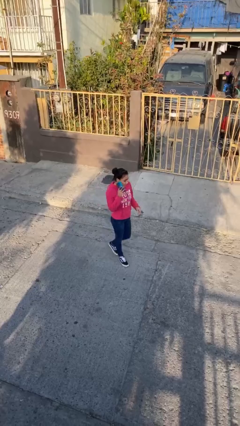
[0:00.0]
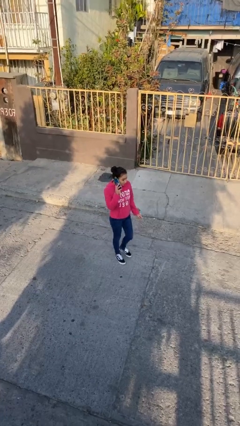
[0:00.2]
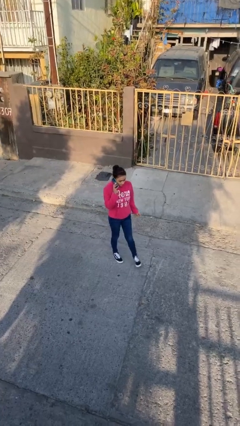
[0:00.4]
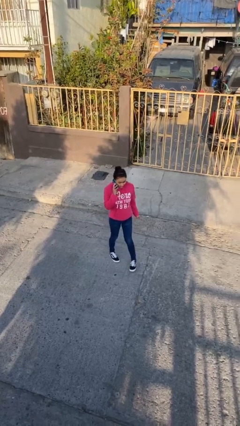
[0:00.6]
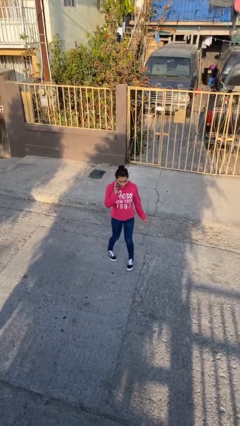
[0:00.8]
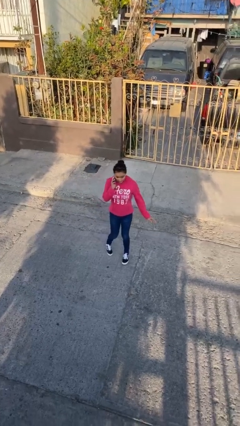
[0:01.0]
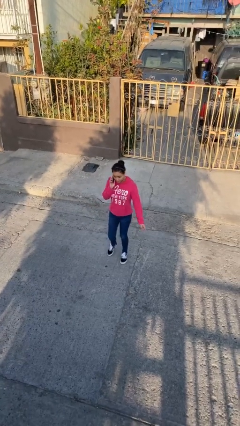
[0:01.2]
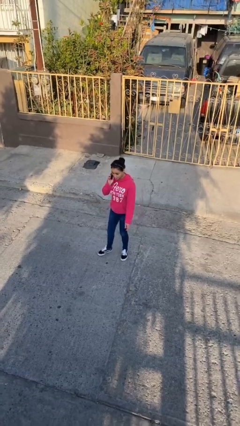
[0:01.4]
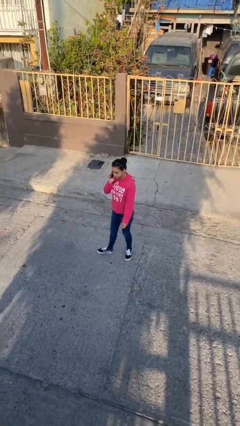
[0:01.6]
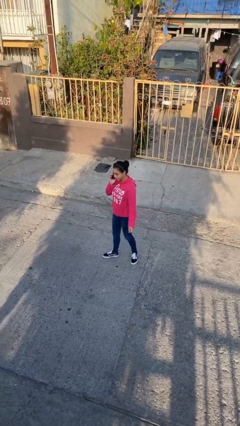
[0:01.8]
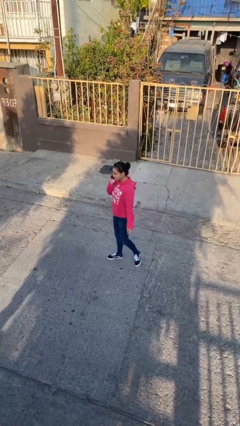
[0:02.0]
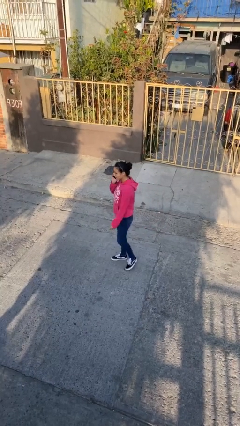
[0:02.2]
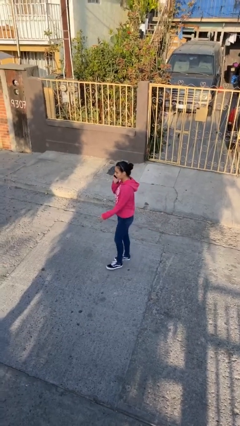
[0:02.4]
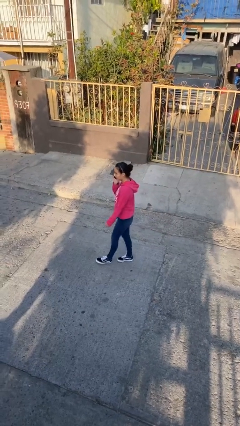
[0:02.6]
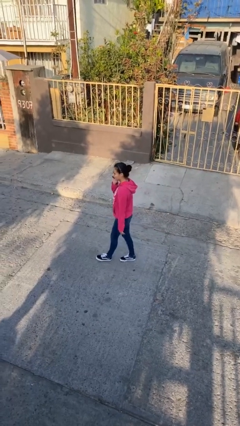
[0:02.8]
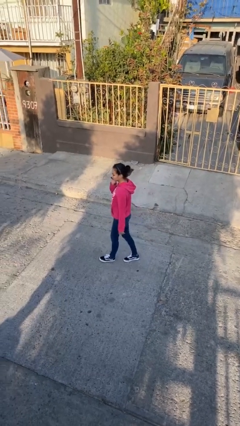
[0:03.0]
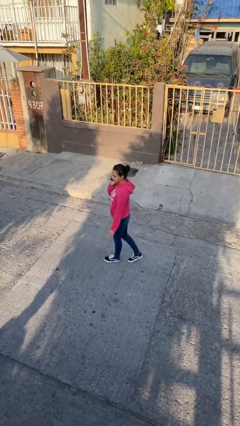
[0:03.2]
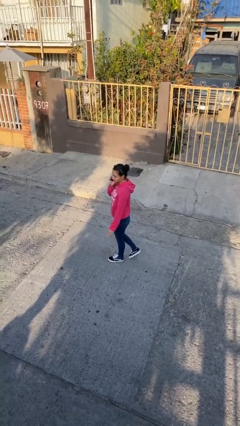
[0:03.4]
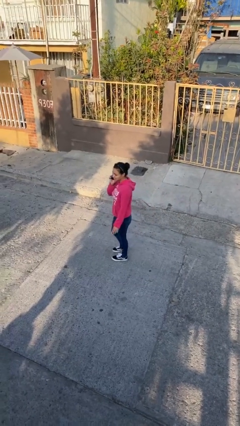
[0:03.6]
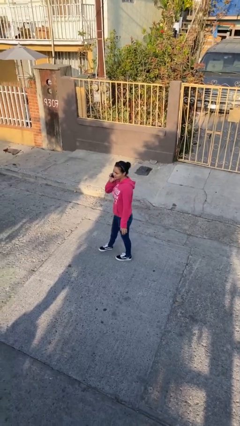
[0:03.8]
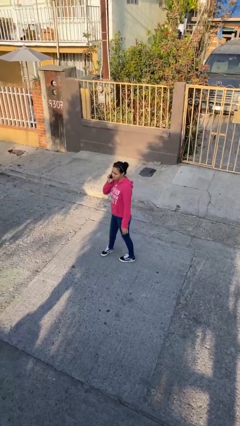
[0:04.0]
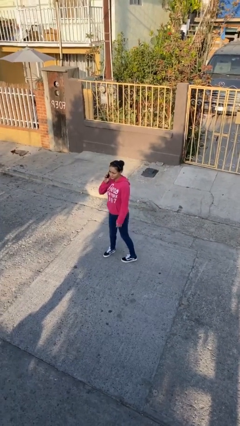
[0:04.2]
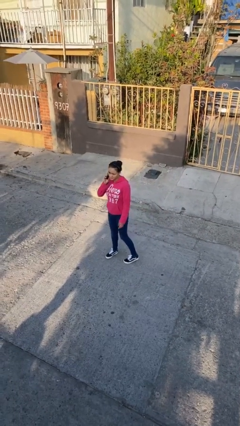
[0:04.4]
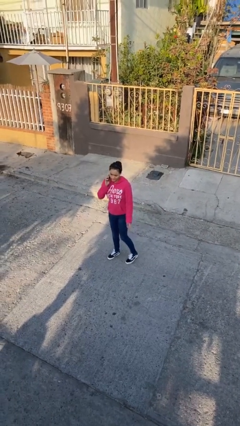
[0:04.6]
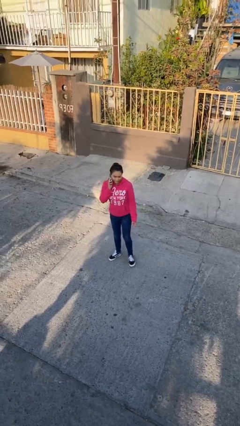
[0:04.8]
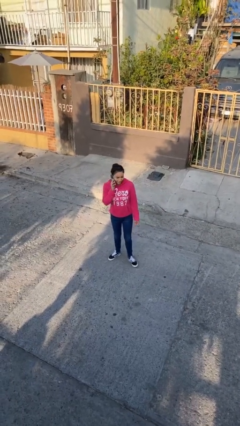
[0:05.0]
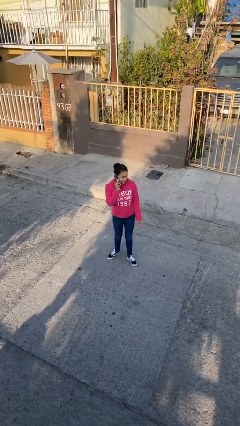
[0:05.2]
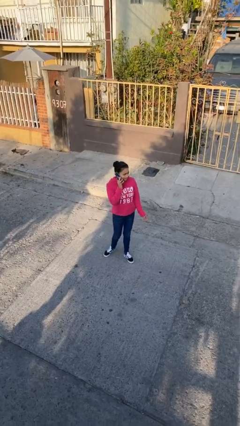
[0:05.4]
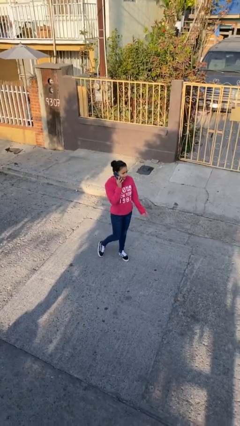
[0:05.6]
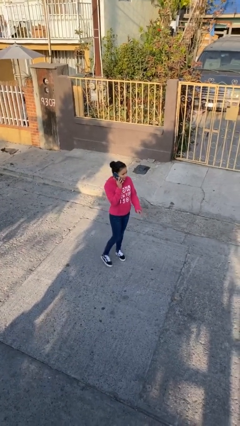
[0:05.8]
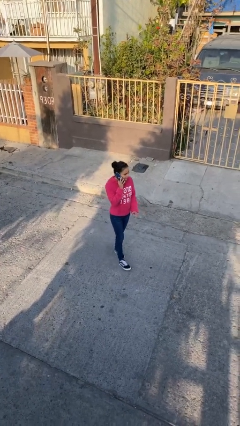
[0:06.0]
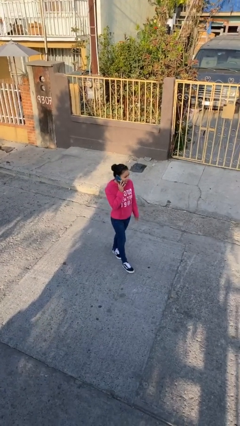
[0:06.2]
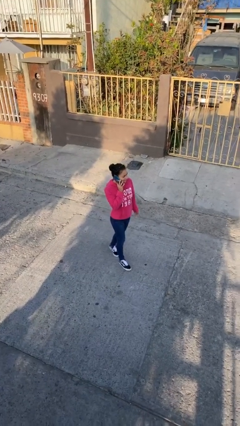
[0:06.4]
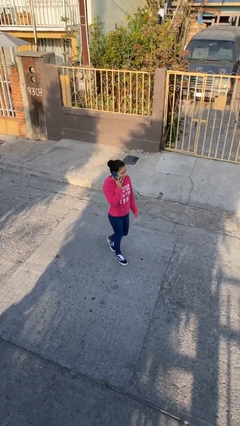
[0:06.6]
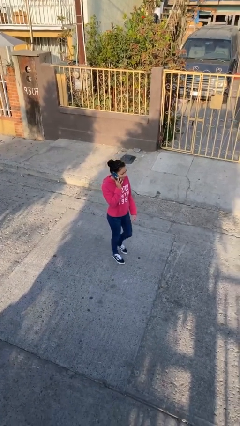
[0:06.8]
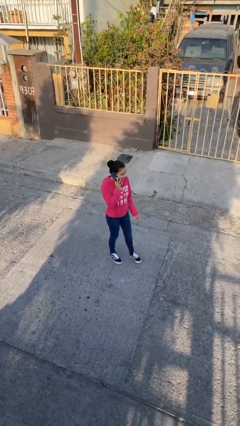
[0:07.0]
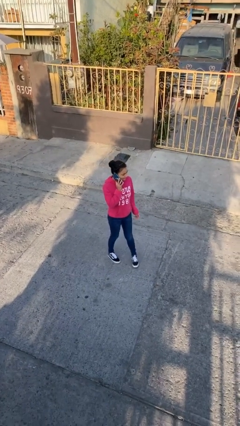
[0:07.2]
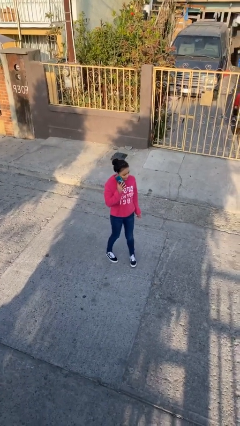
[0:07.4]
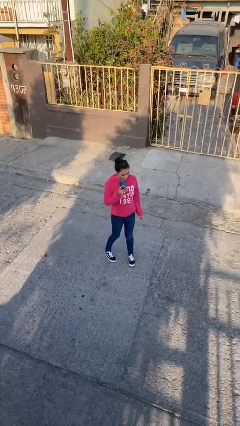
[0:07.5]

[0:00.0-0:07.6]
person talks on phone

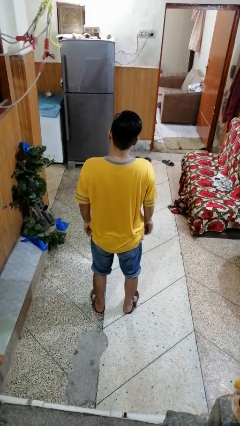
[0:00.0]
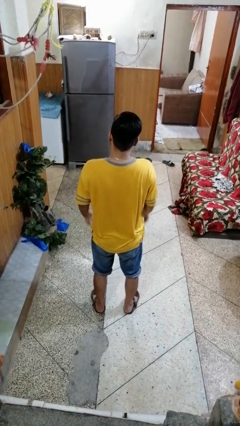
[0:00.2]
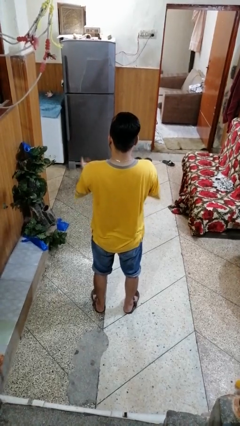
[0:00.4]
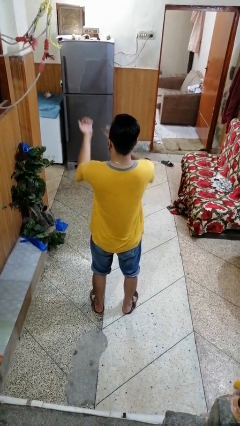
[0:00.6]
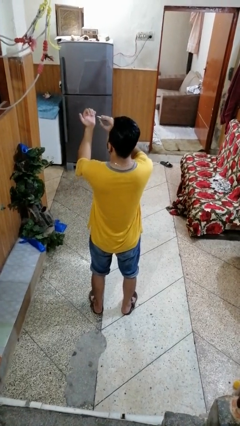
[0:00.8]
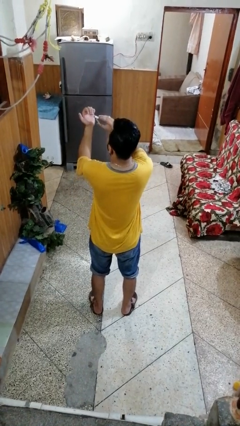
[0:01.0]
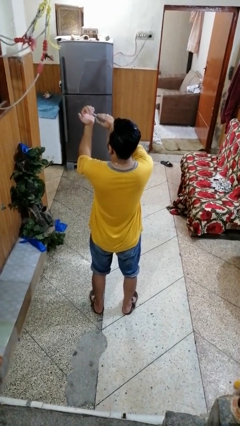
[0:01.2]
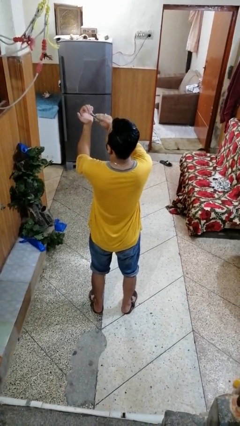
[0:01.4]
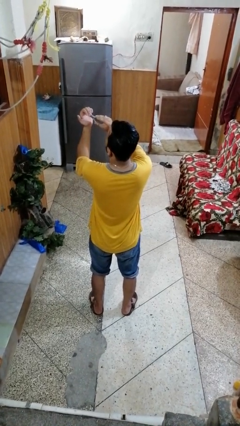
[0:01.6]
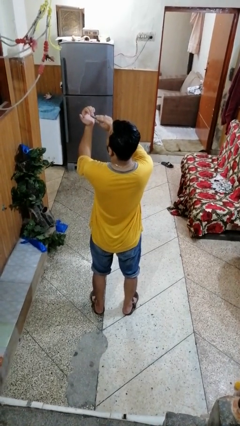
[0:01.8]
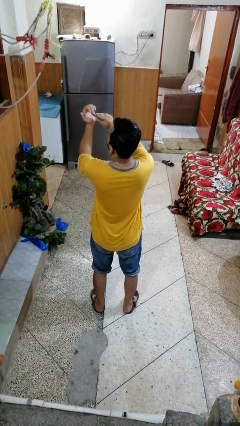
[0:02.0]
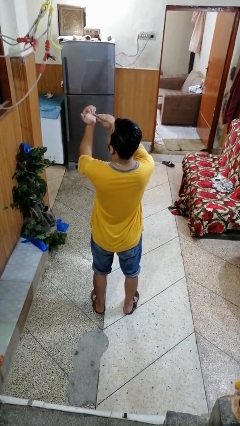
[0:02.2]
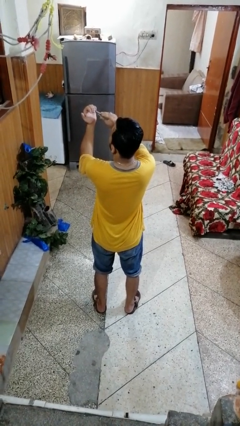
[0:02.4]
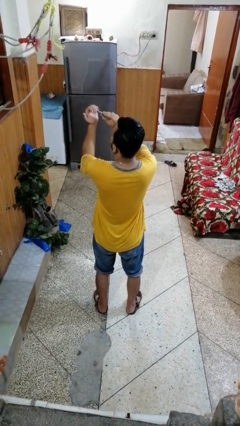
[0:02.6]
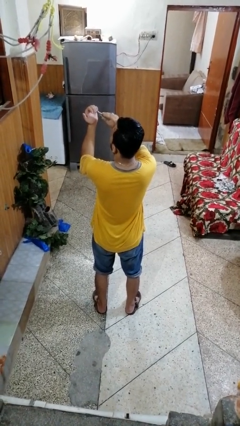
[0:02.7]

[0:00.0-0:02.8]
person clips fingernails

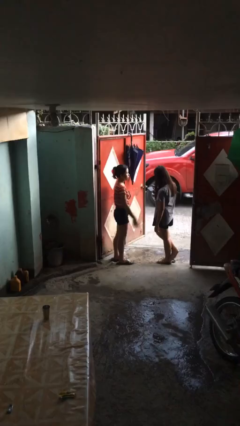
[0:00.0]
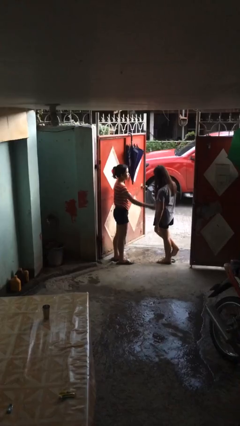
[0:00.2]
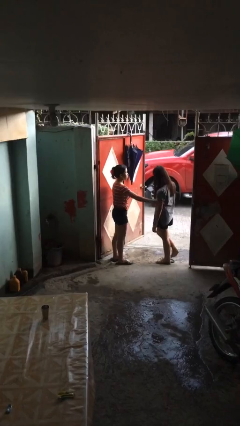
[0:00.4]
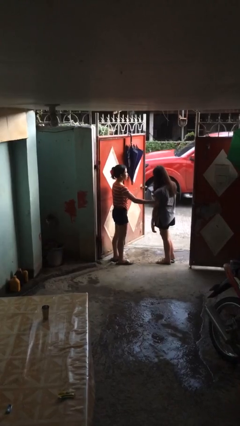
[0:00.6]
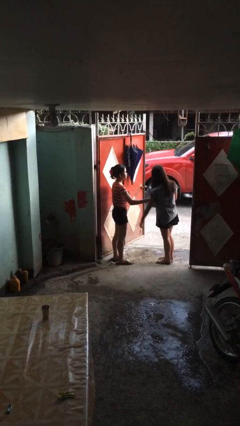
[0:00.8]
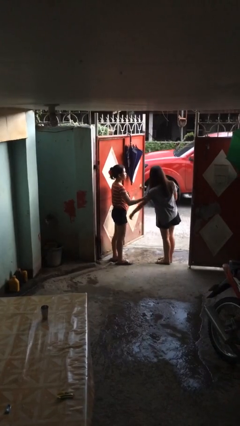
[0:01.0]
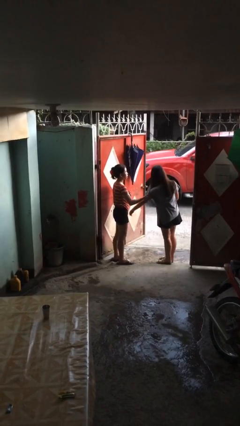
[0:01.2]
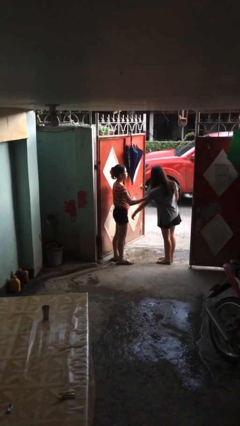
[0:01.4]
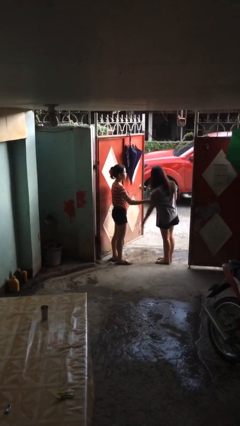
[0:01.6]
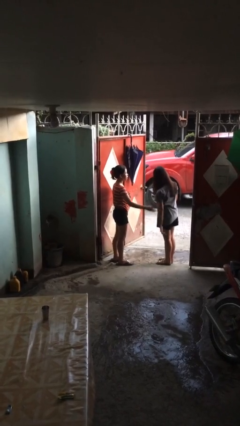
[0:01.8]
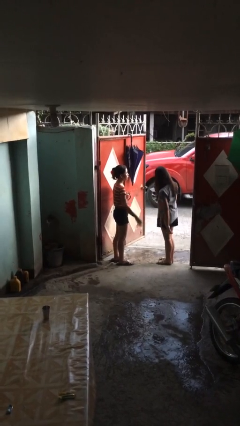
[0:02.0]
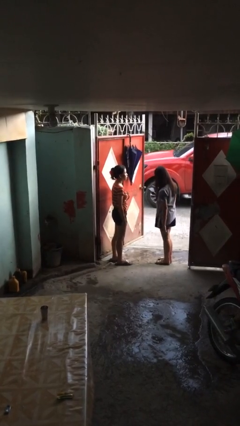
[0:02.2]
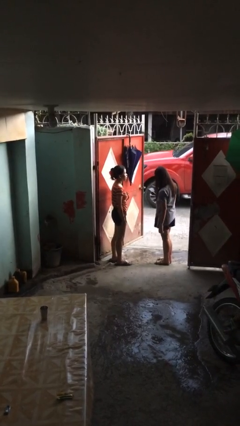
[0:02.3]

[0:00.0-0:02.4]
person grabs person by bicep

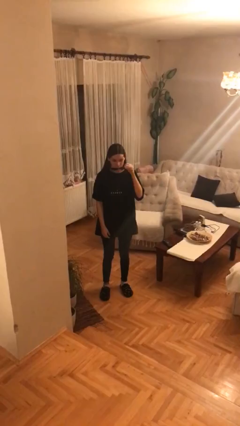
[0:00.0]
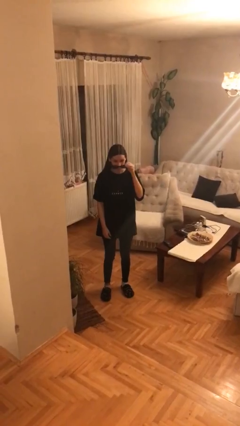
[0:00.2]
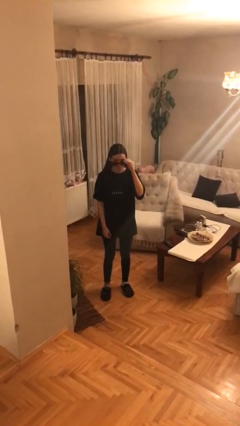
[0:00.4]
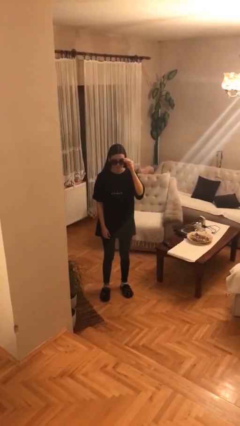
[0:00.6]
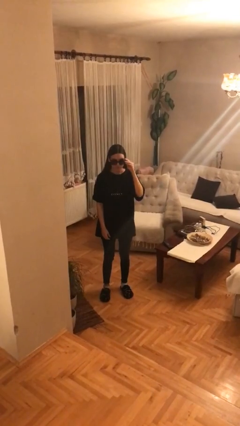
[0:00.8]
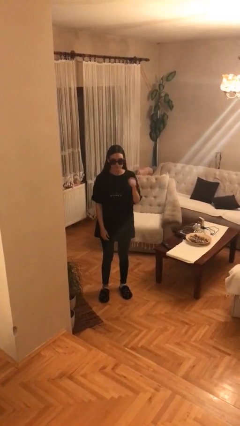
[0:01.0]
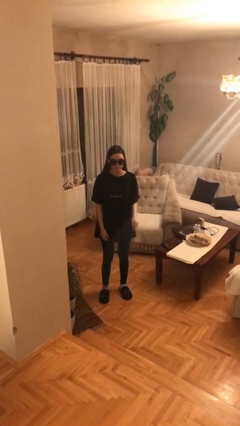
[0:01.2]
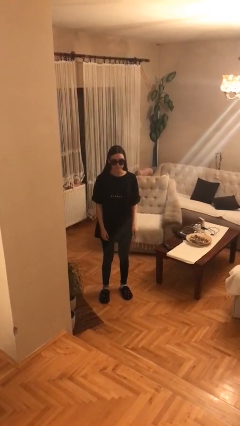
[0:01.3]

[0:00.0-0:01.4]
person puts on sunglasses

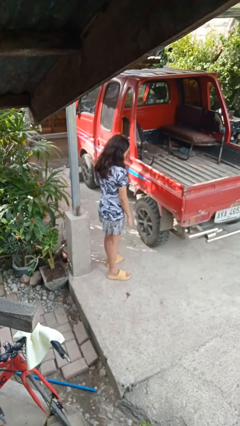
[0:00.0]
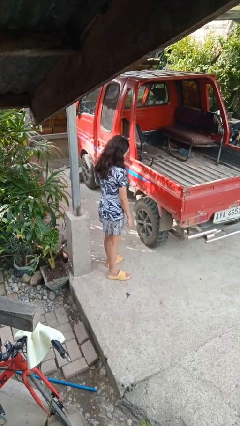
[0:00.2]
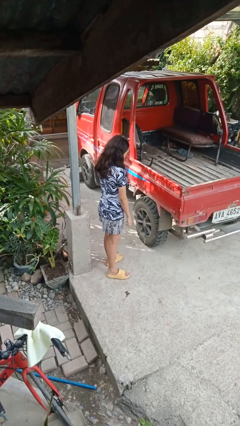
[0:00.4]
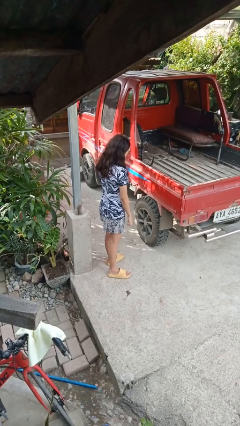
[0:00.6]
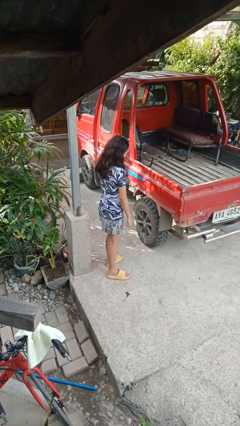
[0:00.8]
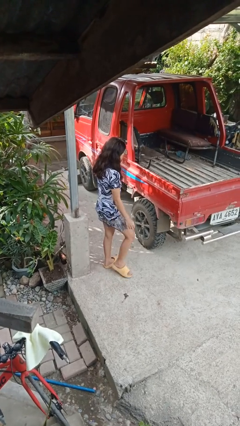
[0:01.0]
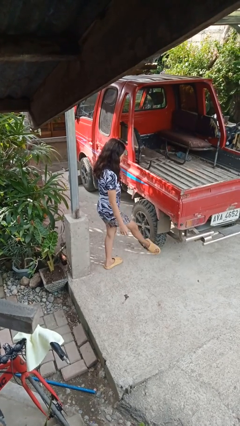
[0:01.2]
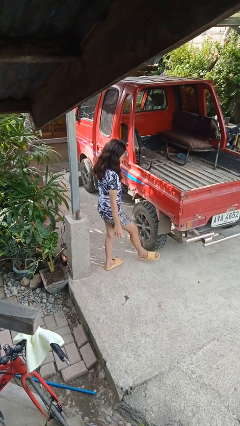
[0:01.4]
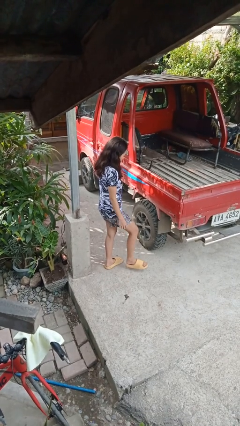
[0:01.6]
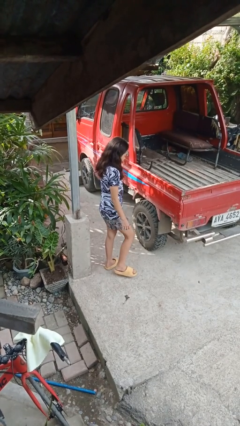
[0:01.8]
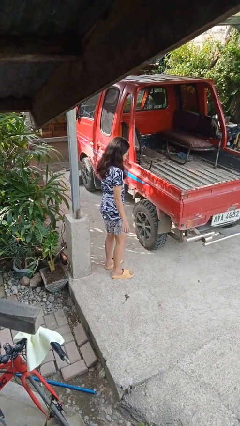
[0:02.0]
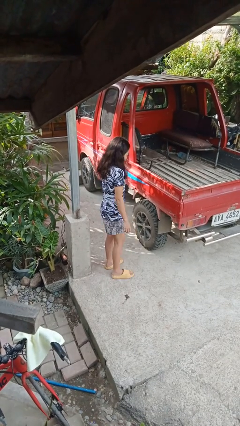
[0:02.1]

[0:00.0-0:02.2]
person kicks car tires

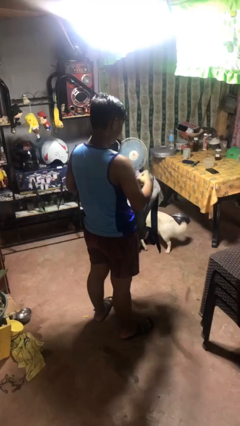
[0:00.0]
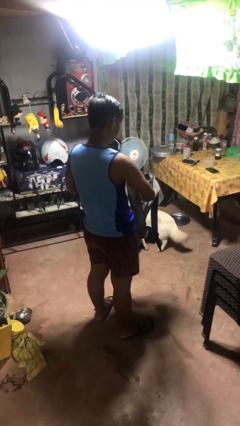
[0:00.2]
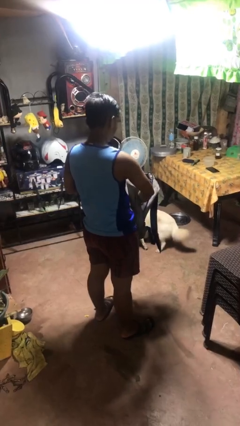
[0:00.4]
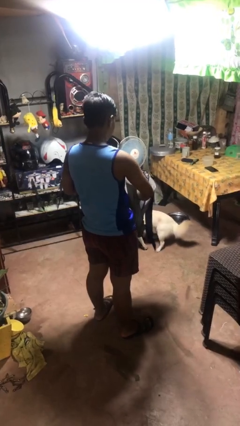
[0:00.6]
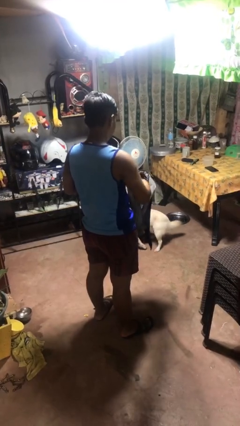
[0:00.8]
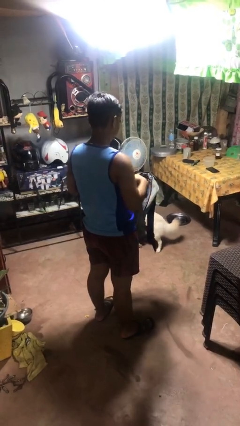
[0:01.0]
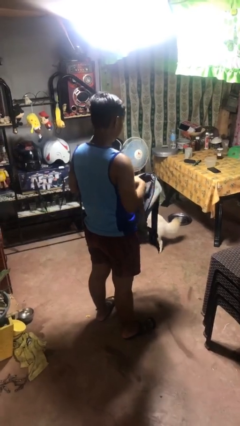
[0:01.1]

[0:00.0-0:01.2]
person puts object into bag

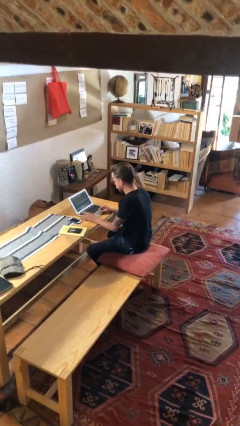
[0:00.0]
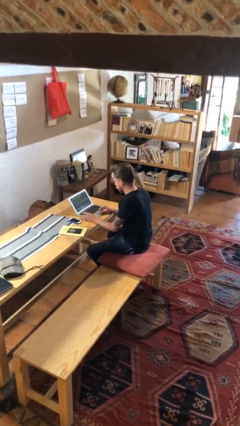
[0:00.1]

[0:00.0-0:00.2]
person stands up
